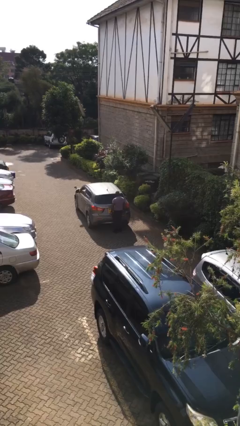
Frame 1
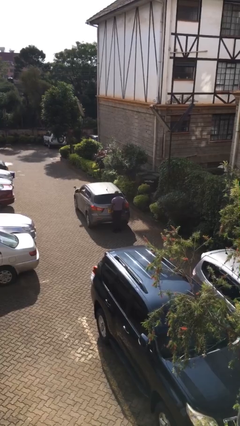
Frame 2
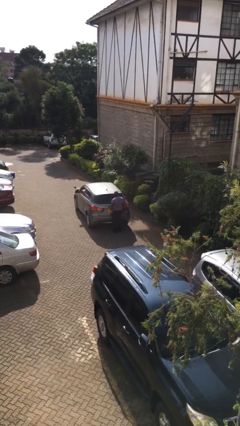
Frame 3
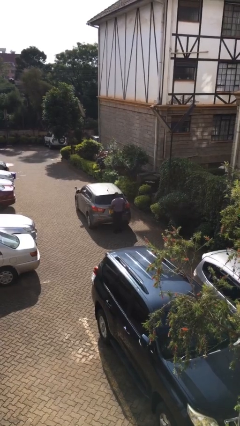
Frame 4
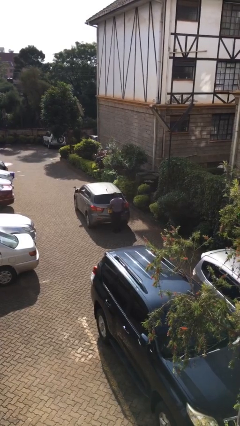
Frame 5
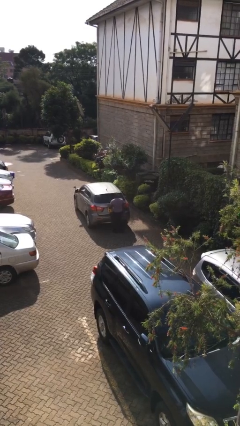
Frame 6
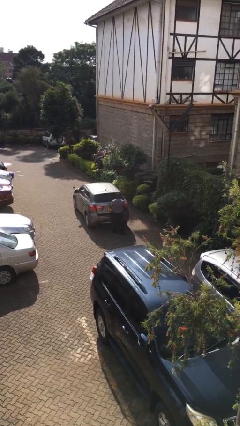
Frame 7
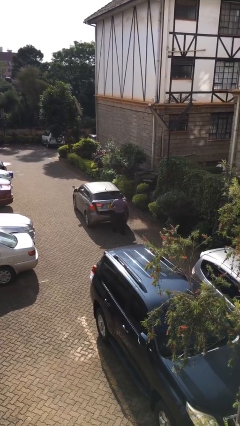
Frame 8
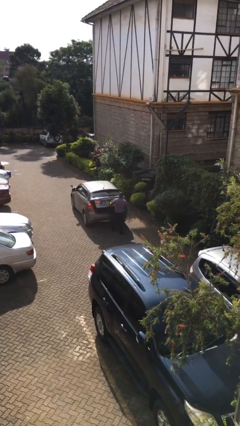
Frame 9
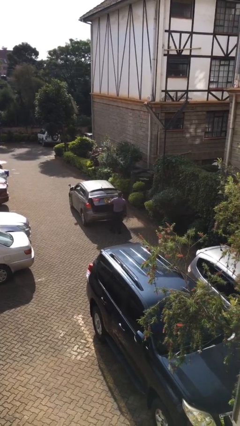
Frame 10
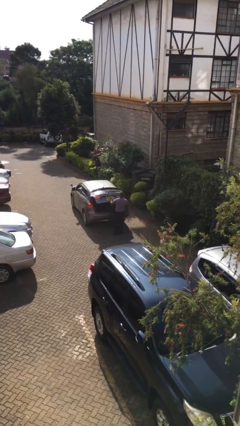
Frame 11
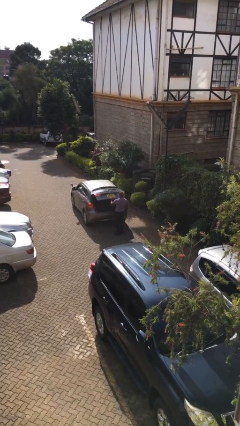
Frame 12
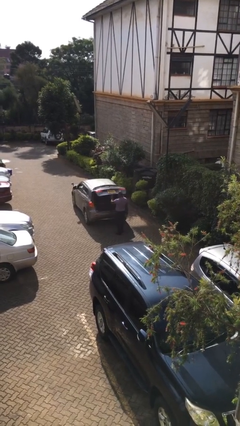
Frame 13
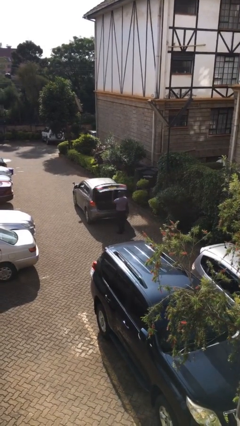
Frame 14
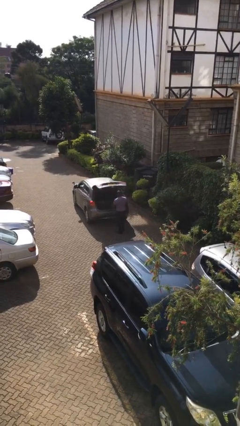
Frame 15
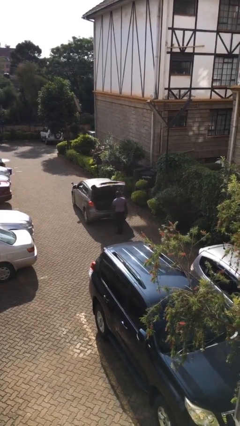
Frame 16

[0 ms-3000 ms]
person opens car trunk

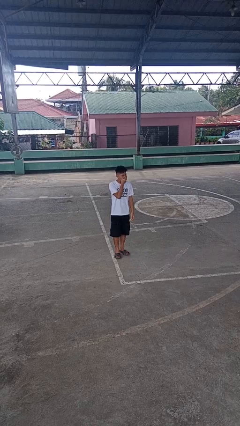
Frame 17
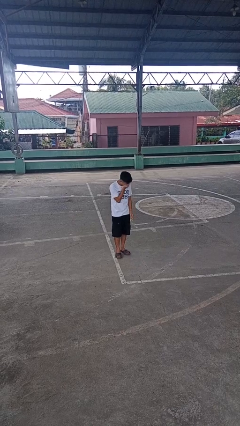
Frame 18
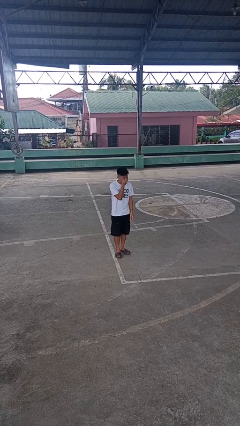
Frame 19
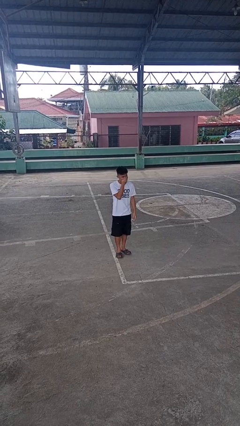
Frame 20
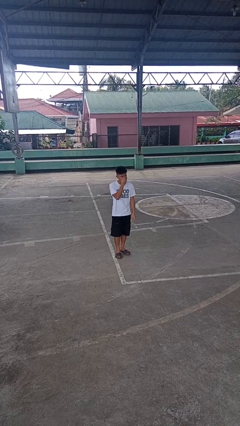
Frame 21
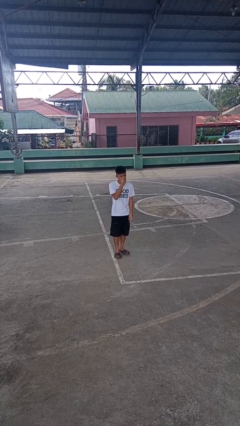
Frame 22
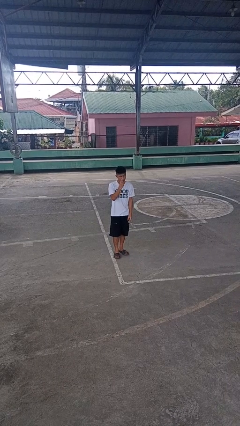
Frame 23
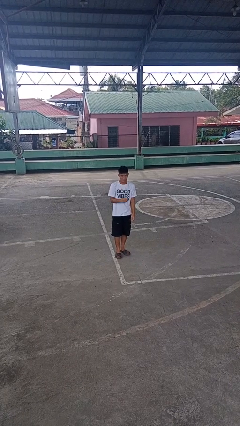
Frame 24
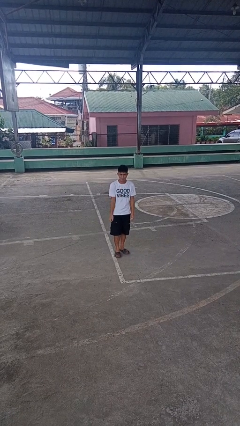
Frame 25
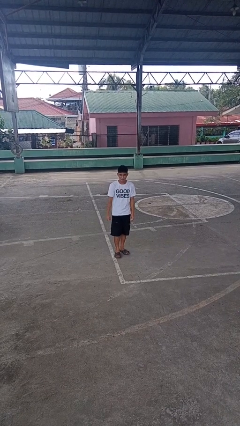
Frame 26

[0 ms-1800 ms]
person sneezes into hand

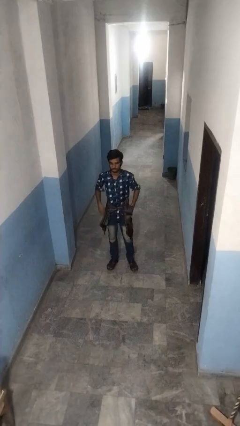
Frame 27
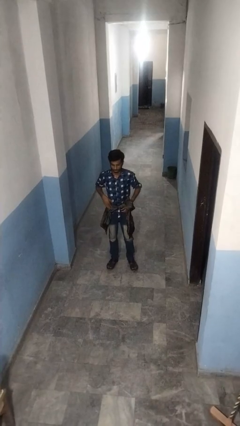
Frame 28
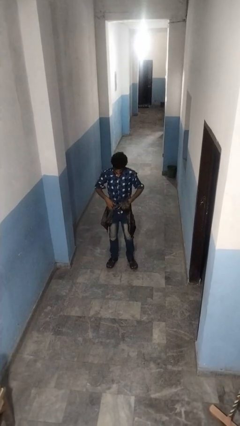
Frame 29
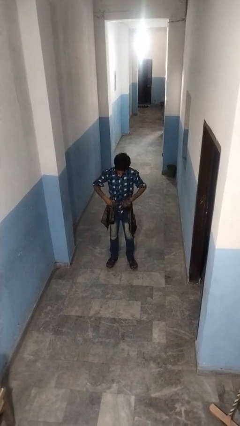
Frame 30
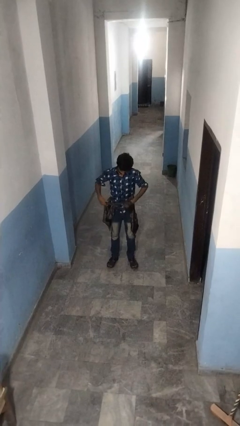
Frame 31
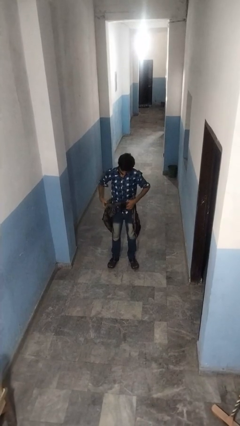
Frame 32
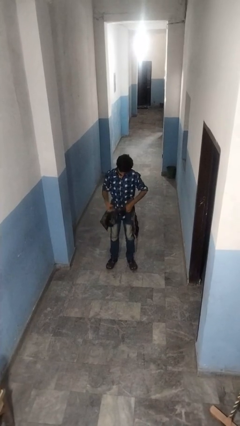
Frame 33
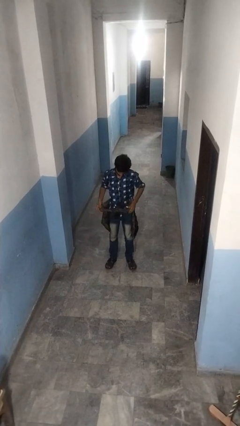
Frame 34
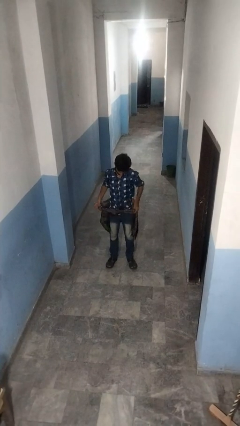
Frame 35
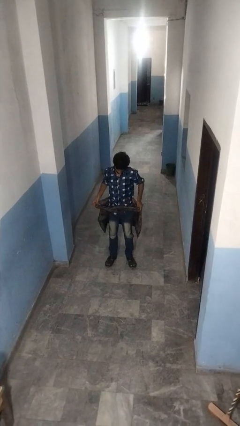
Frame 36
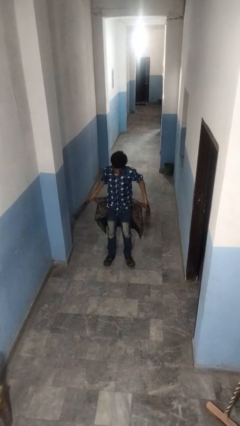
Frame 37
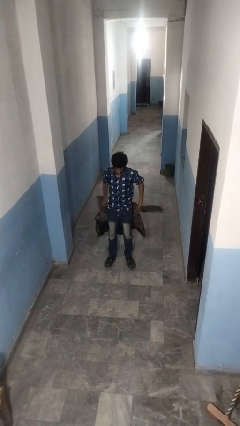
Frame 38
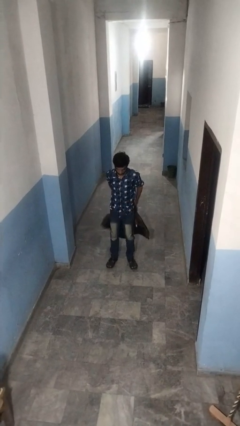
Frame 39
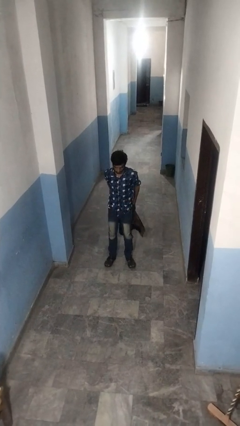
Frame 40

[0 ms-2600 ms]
person unties jacket around waist

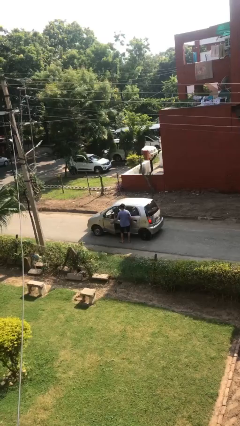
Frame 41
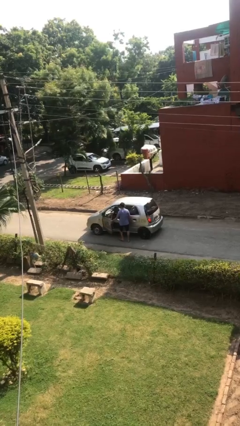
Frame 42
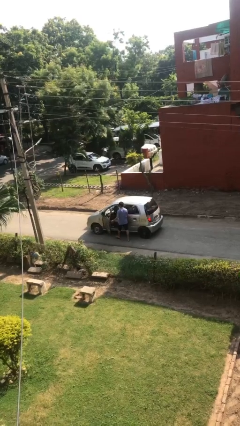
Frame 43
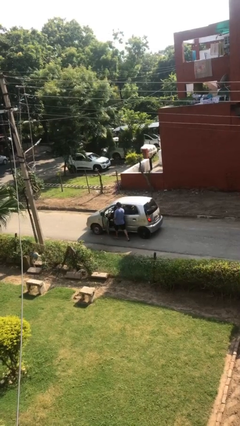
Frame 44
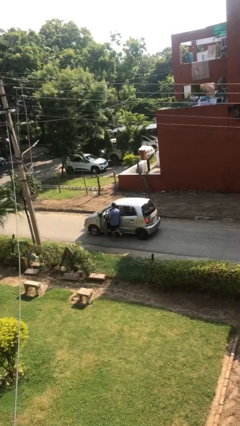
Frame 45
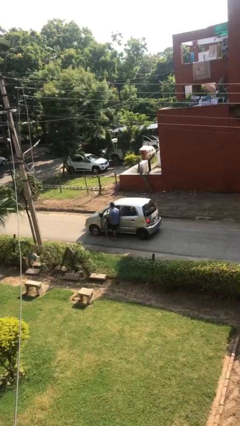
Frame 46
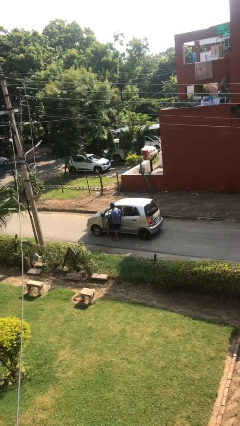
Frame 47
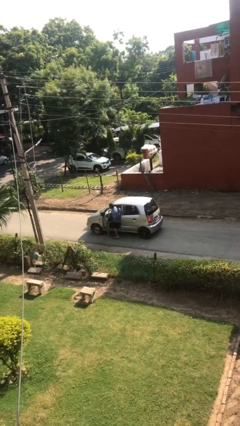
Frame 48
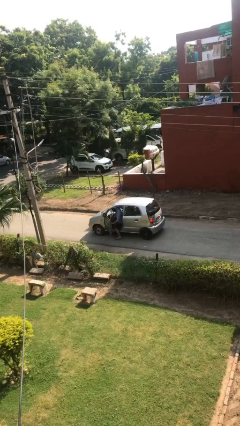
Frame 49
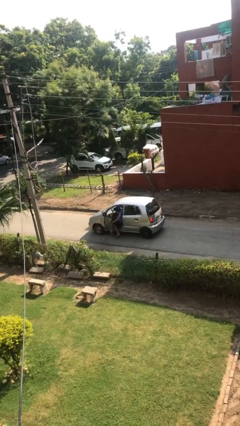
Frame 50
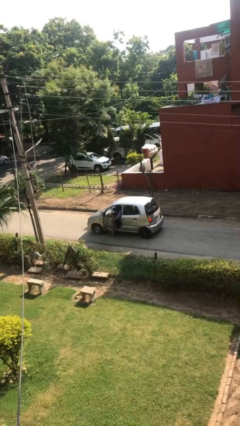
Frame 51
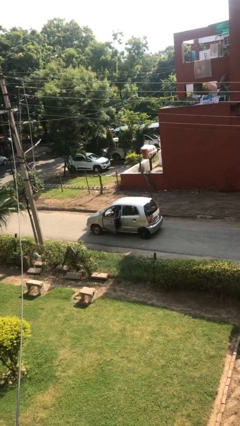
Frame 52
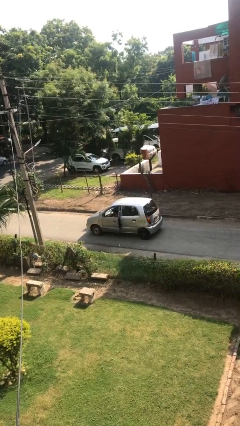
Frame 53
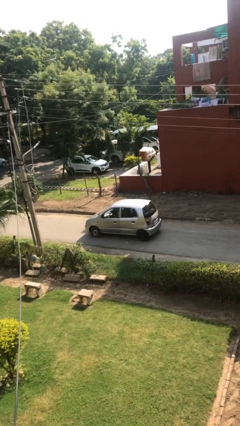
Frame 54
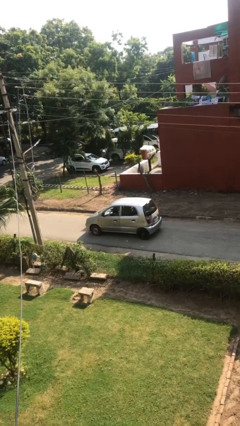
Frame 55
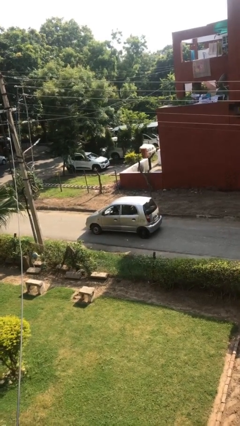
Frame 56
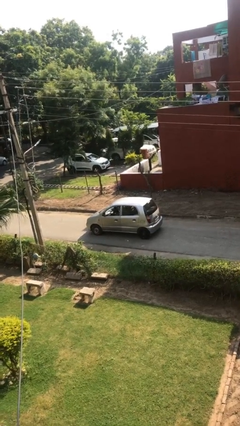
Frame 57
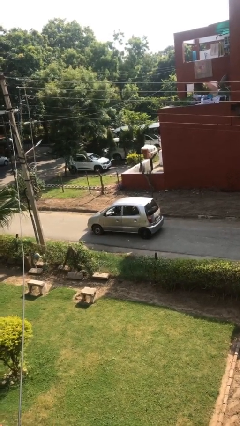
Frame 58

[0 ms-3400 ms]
car picks up person

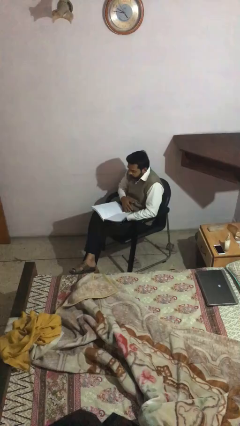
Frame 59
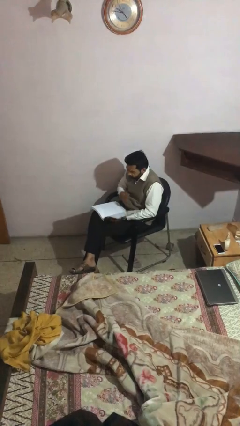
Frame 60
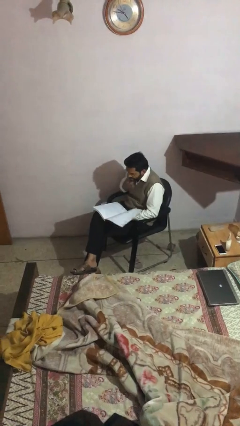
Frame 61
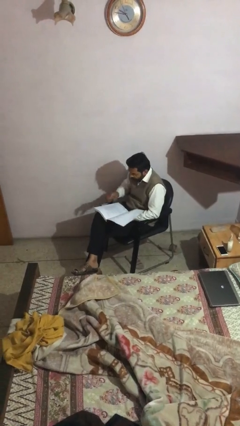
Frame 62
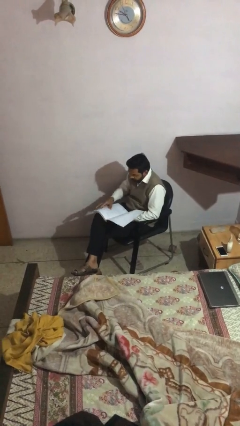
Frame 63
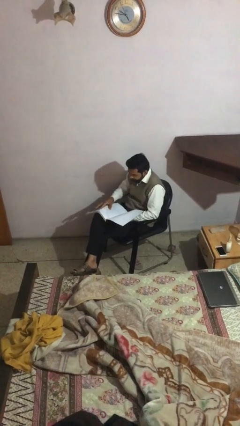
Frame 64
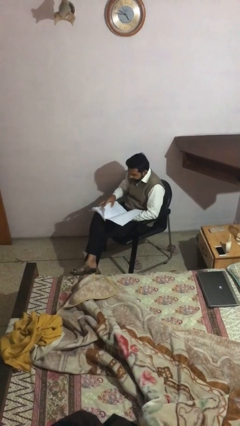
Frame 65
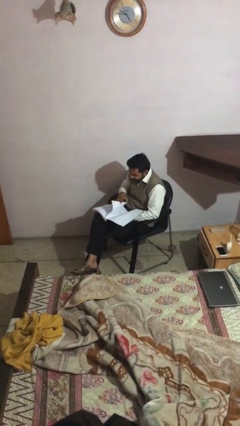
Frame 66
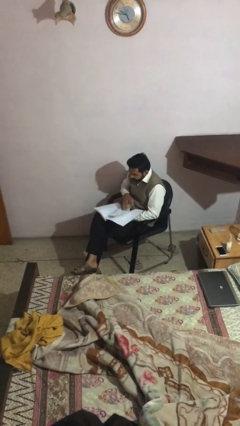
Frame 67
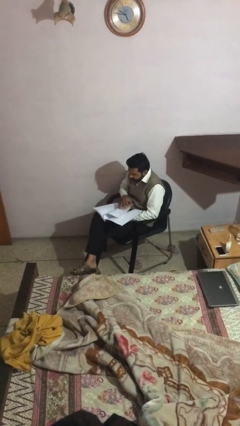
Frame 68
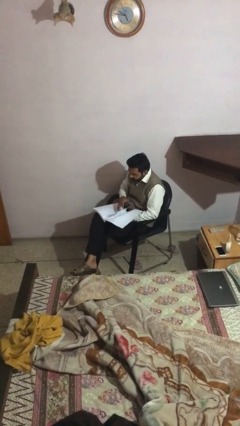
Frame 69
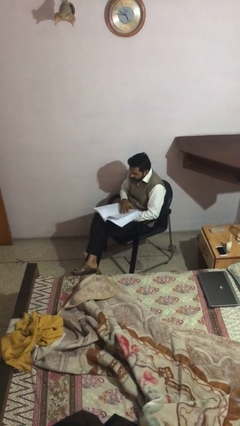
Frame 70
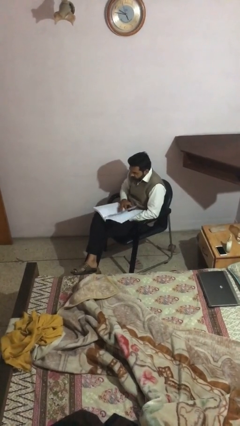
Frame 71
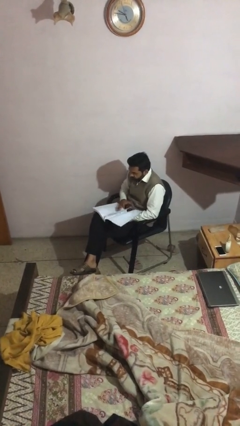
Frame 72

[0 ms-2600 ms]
person reads document

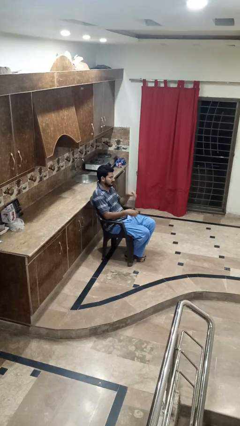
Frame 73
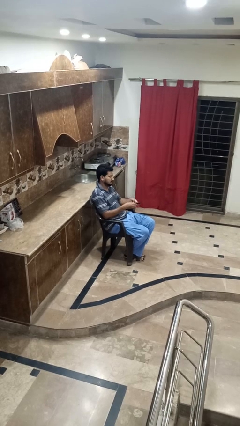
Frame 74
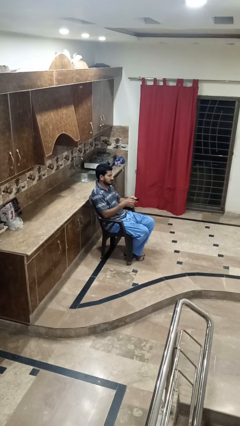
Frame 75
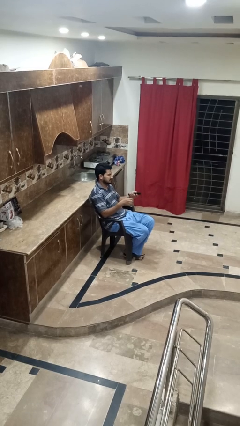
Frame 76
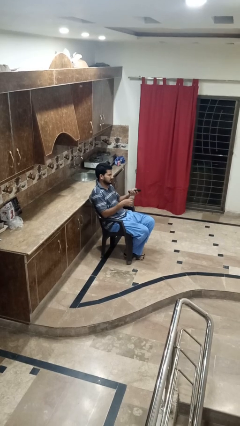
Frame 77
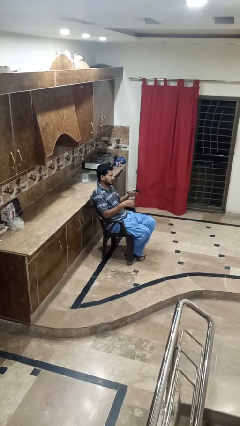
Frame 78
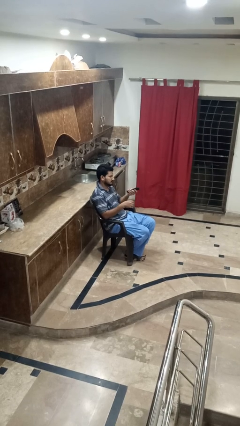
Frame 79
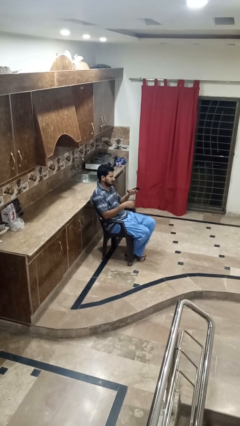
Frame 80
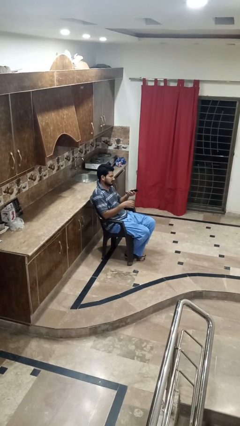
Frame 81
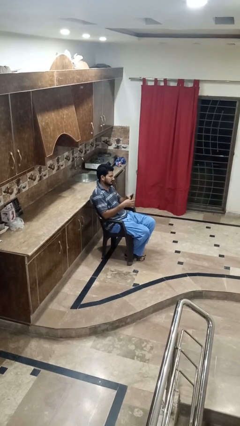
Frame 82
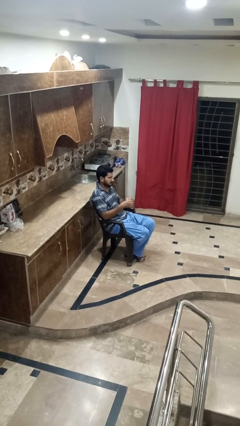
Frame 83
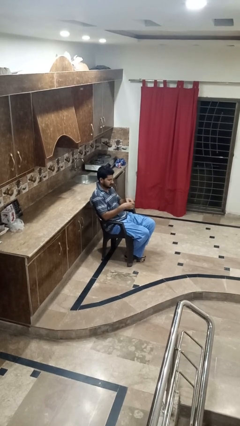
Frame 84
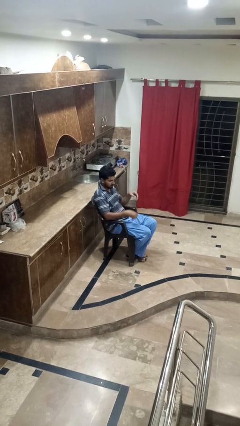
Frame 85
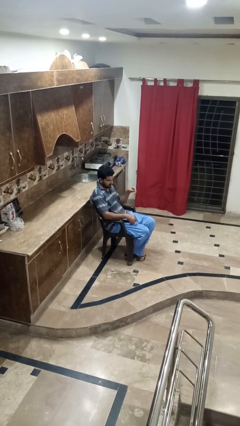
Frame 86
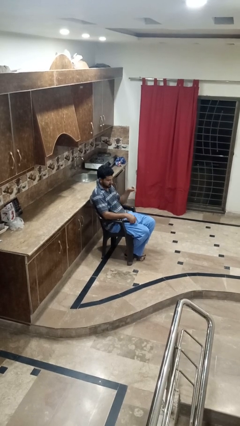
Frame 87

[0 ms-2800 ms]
person uses television remote

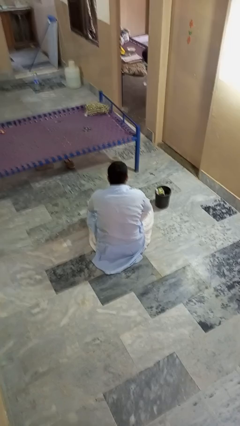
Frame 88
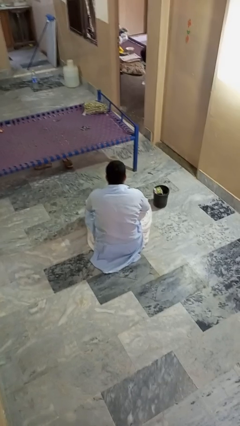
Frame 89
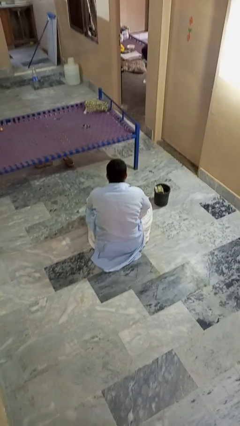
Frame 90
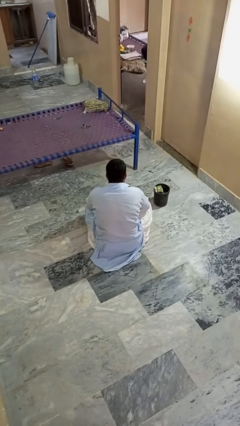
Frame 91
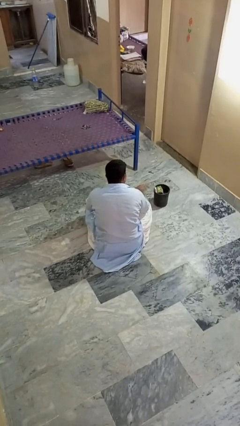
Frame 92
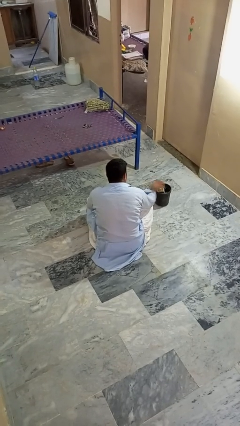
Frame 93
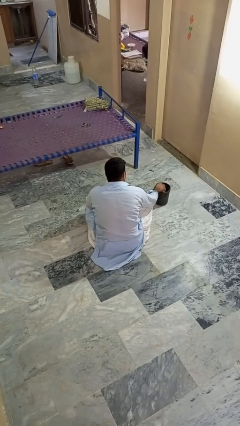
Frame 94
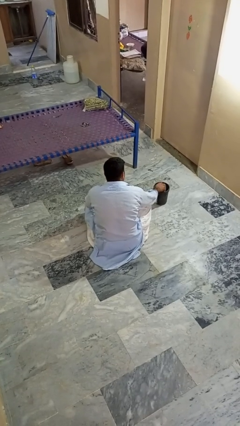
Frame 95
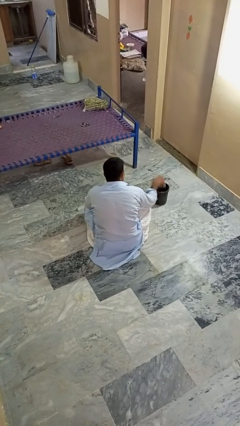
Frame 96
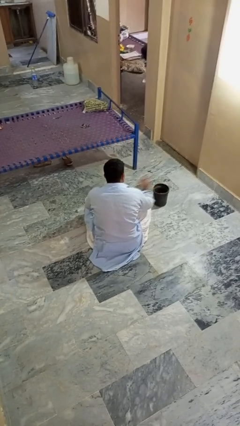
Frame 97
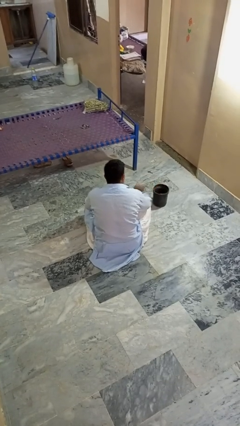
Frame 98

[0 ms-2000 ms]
person takes object from basket
